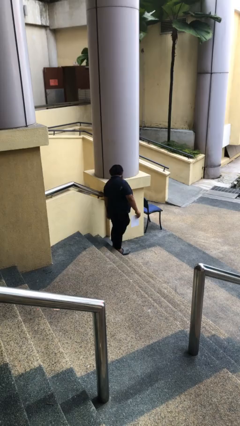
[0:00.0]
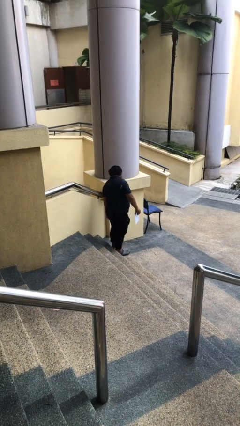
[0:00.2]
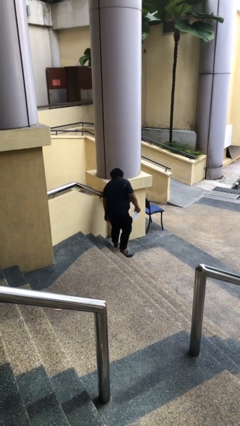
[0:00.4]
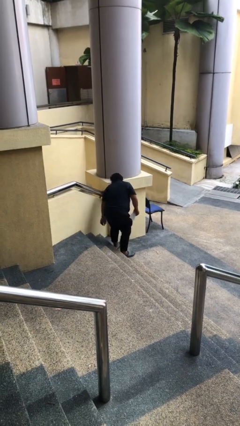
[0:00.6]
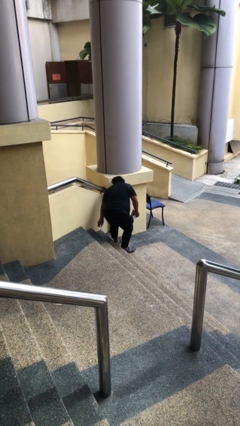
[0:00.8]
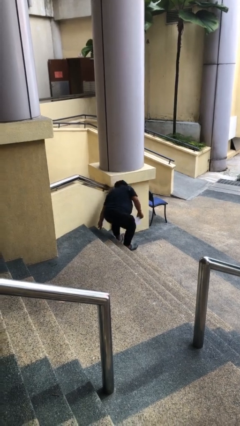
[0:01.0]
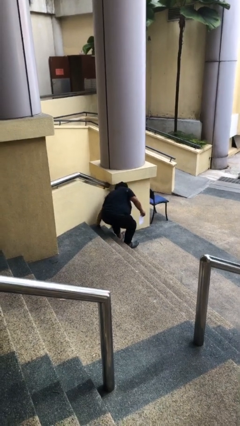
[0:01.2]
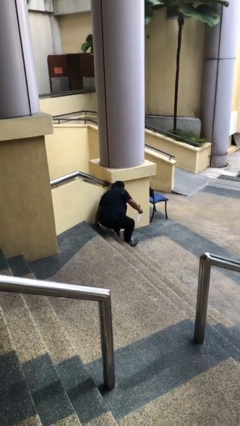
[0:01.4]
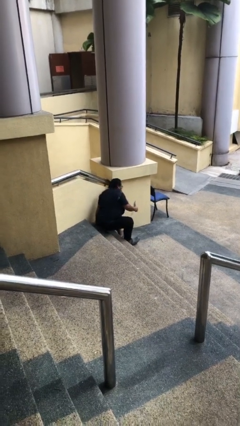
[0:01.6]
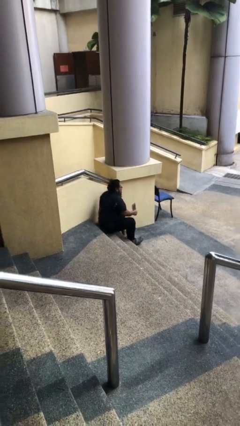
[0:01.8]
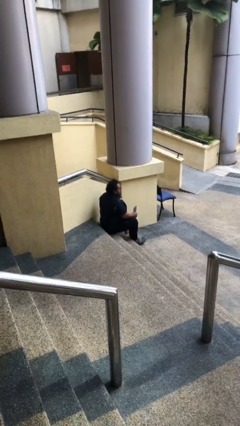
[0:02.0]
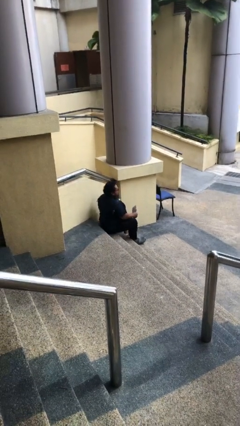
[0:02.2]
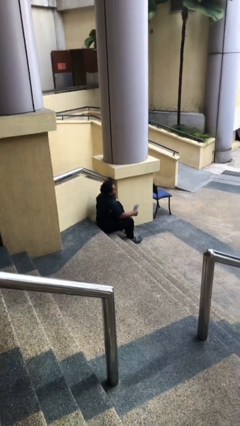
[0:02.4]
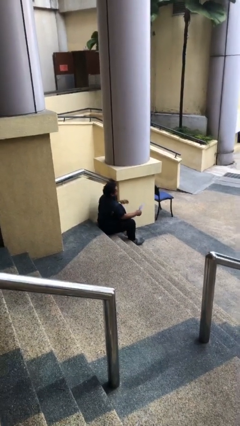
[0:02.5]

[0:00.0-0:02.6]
person sits down

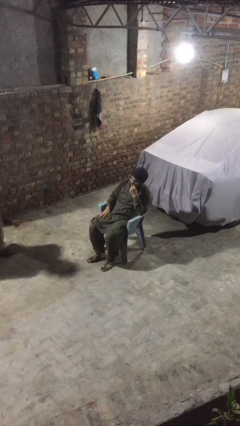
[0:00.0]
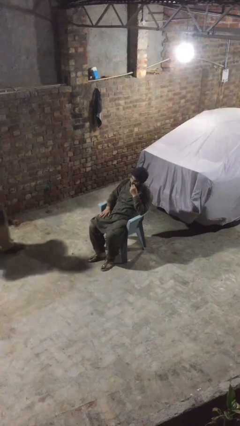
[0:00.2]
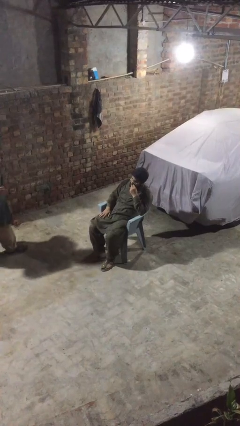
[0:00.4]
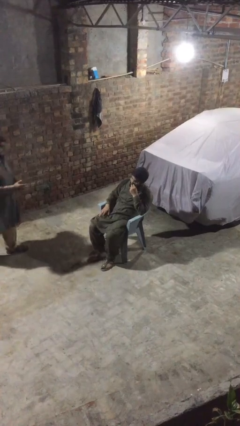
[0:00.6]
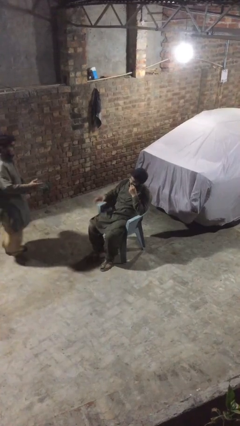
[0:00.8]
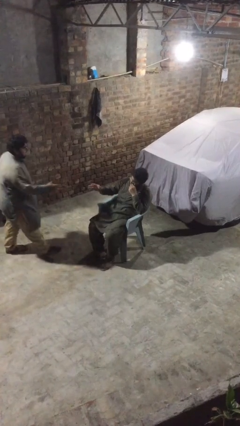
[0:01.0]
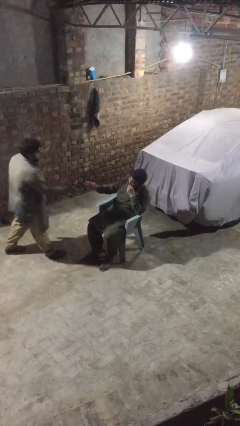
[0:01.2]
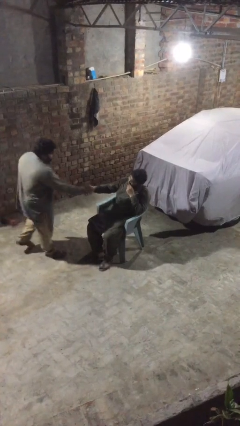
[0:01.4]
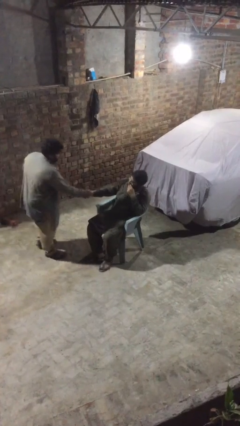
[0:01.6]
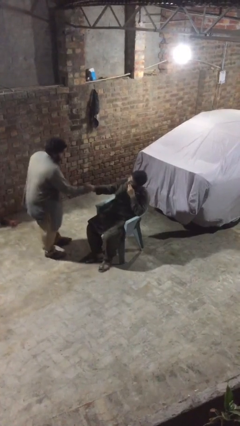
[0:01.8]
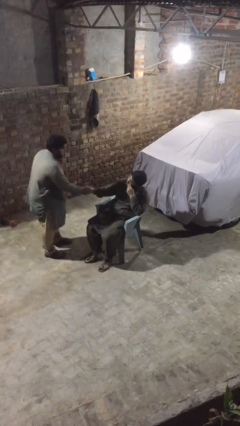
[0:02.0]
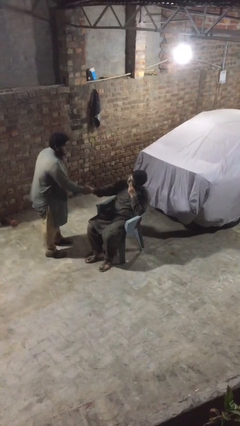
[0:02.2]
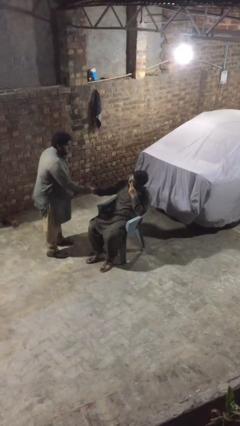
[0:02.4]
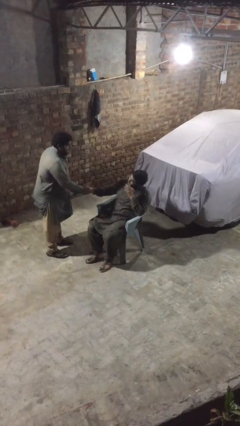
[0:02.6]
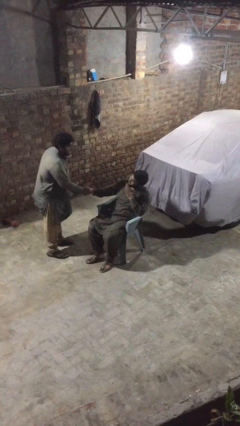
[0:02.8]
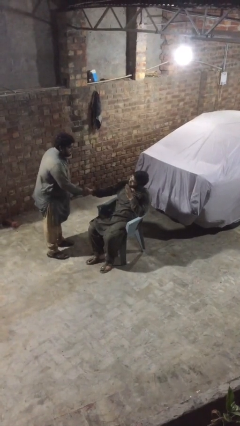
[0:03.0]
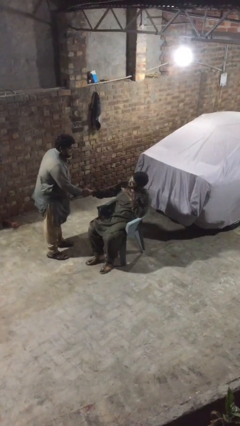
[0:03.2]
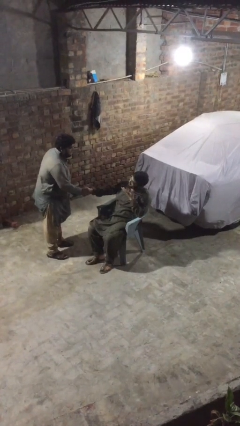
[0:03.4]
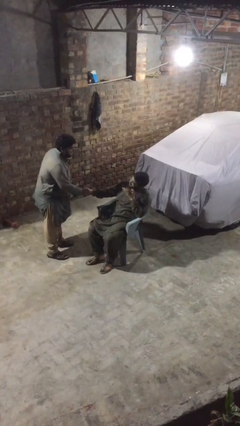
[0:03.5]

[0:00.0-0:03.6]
person shakes hand

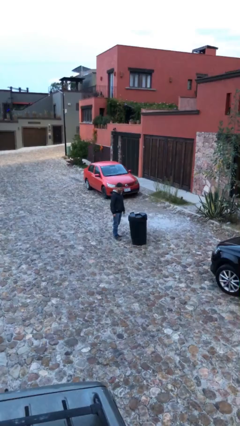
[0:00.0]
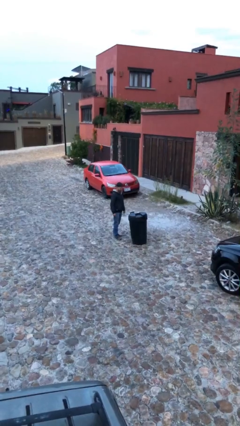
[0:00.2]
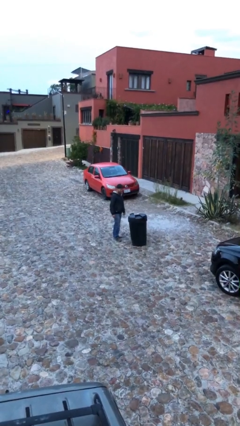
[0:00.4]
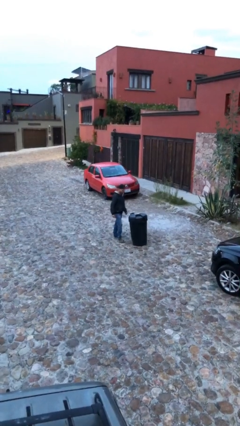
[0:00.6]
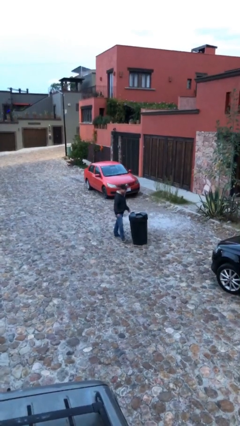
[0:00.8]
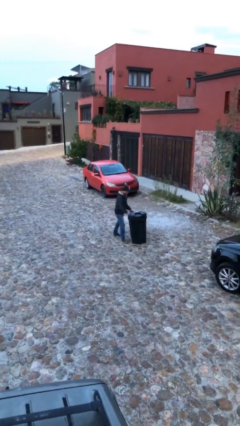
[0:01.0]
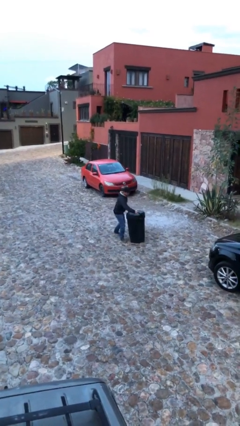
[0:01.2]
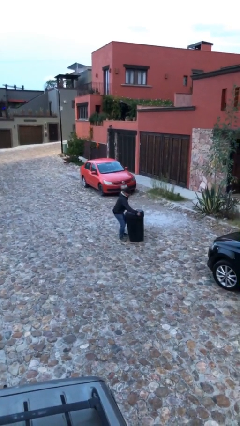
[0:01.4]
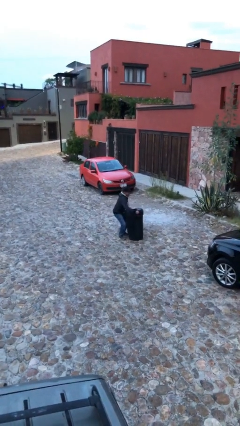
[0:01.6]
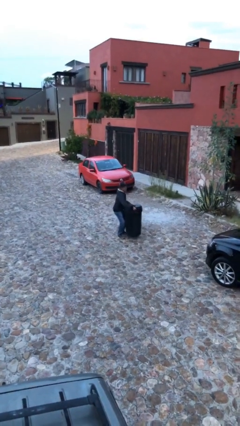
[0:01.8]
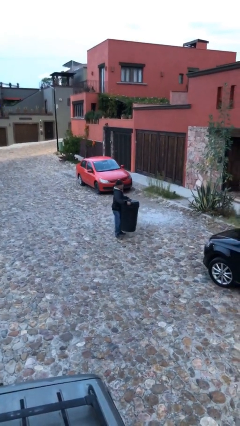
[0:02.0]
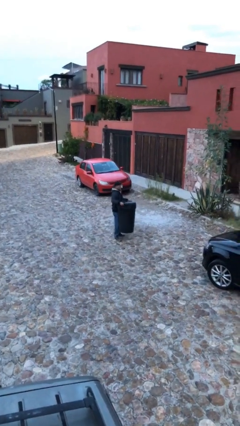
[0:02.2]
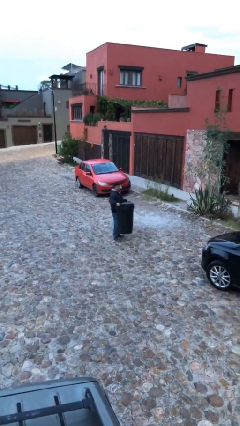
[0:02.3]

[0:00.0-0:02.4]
person picks up object from floor

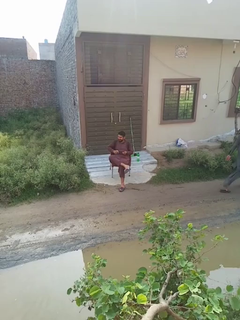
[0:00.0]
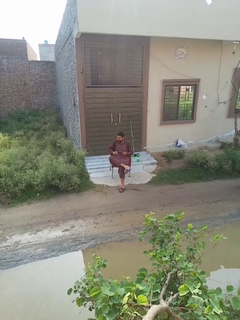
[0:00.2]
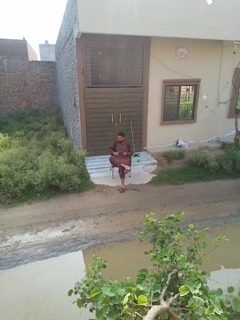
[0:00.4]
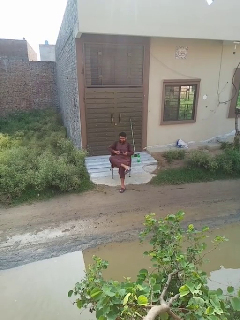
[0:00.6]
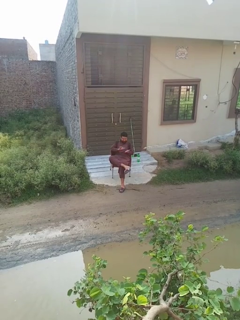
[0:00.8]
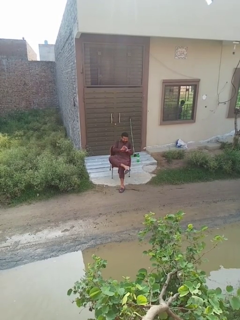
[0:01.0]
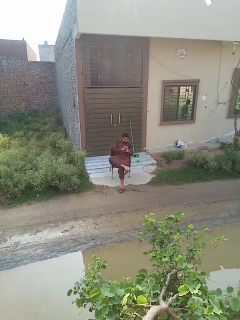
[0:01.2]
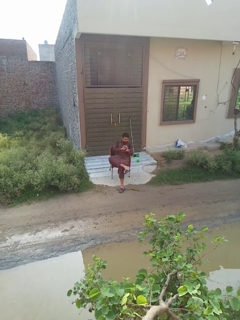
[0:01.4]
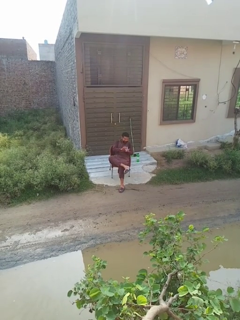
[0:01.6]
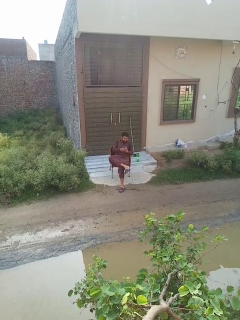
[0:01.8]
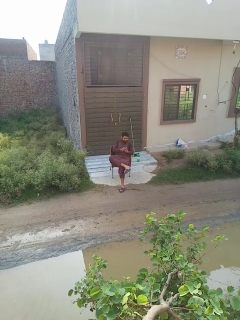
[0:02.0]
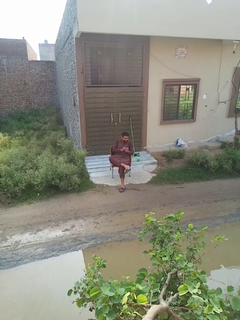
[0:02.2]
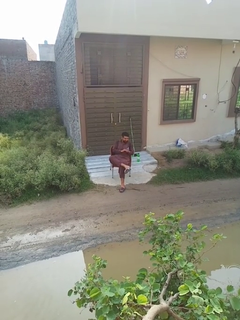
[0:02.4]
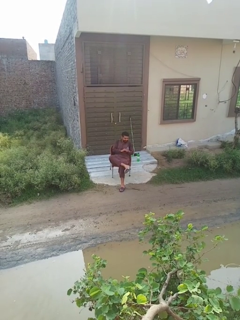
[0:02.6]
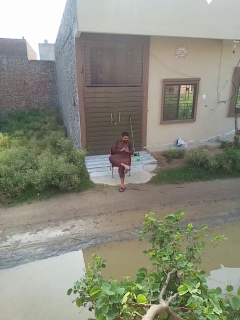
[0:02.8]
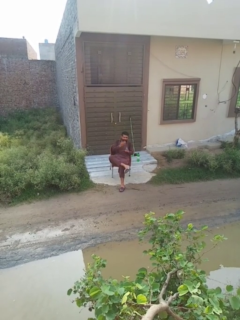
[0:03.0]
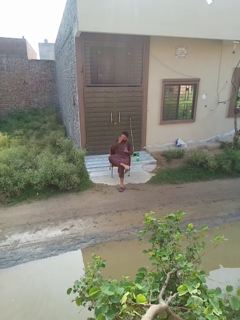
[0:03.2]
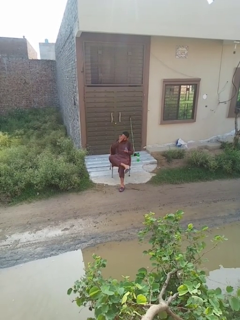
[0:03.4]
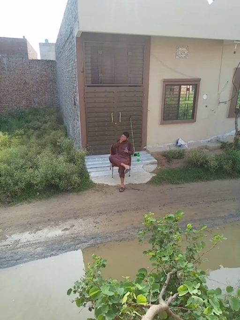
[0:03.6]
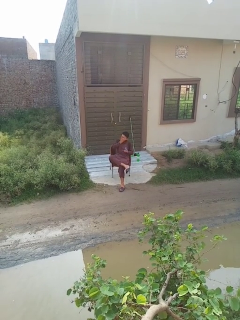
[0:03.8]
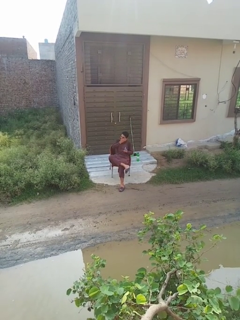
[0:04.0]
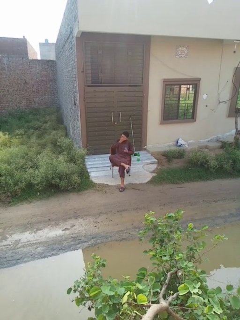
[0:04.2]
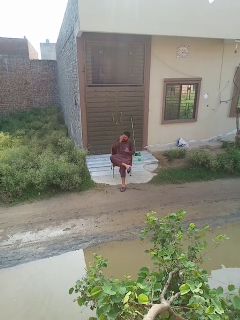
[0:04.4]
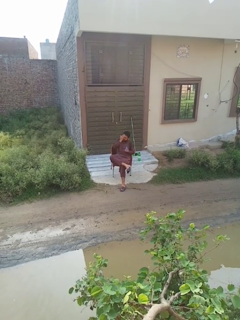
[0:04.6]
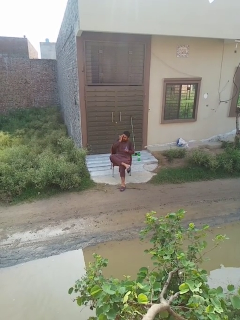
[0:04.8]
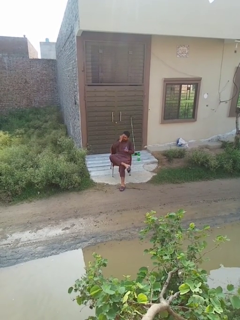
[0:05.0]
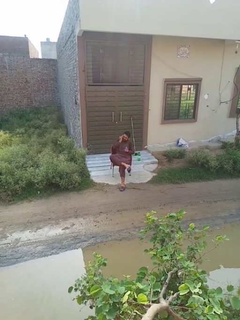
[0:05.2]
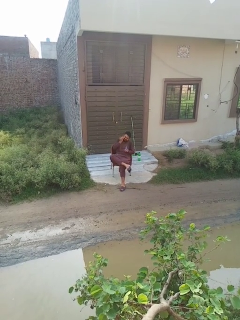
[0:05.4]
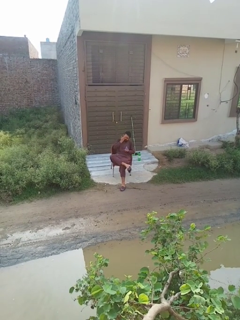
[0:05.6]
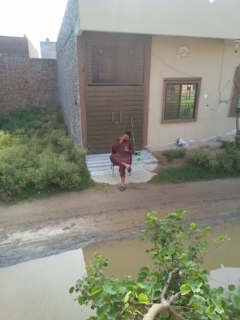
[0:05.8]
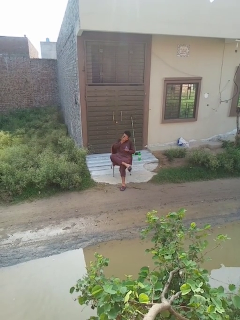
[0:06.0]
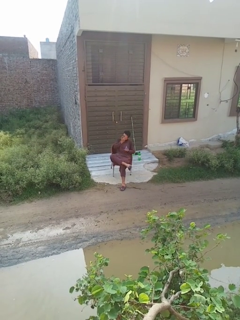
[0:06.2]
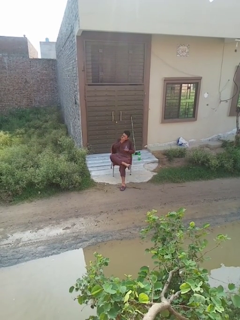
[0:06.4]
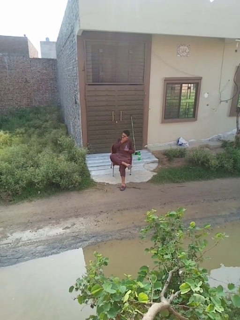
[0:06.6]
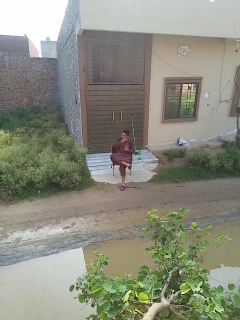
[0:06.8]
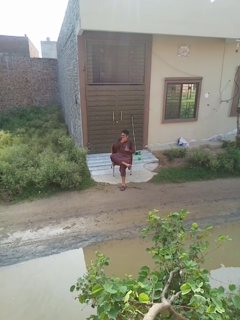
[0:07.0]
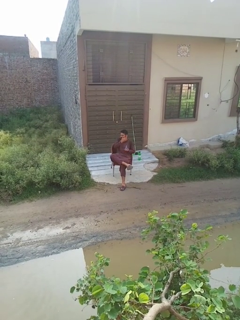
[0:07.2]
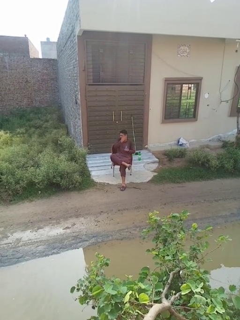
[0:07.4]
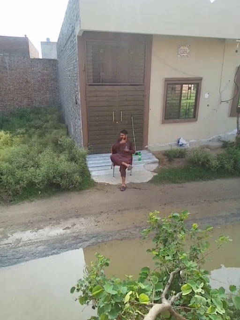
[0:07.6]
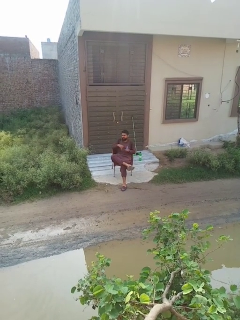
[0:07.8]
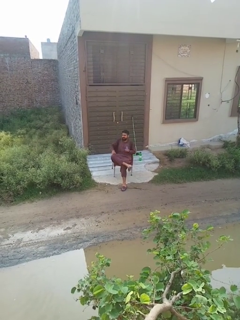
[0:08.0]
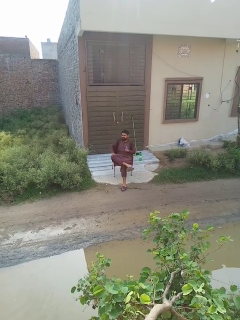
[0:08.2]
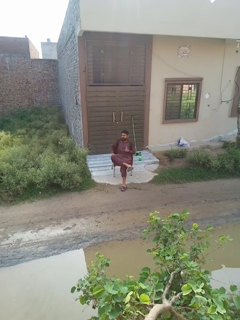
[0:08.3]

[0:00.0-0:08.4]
person applies facial moisturizer

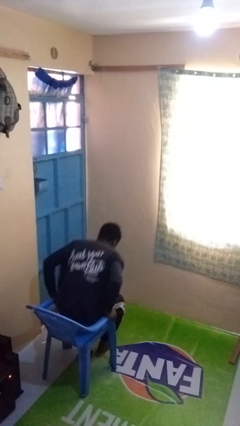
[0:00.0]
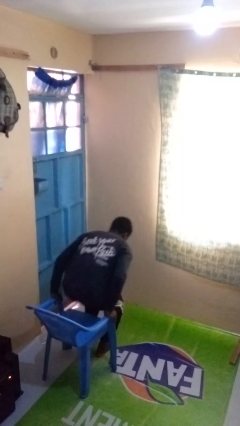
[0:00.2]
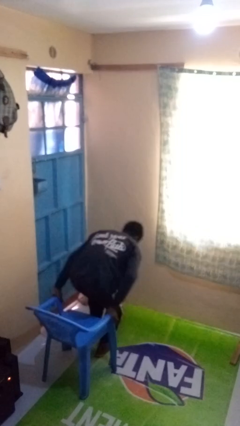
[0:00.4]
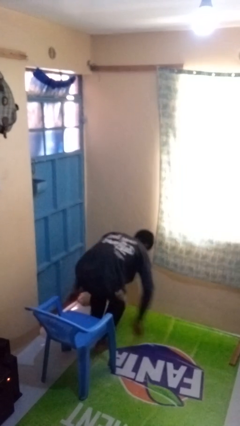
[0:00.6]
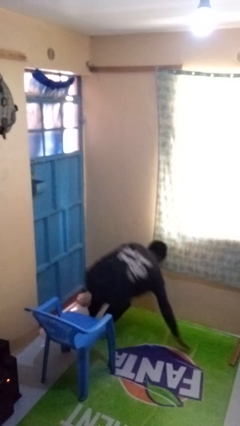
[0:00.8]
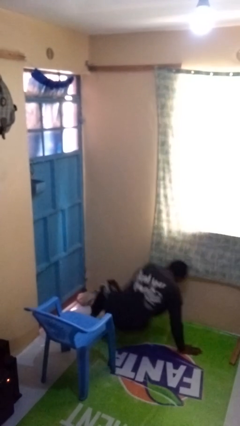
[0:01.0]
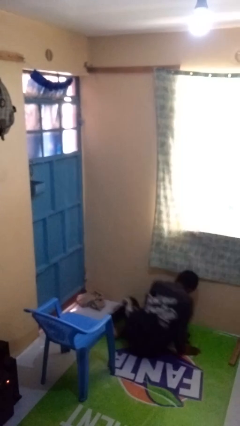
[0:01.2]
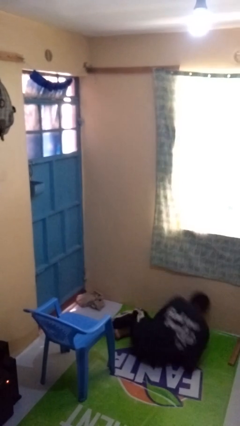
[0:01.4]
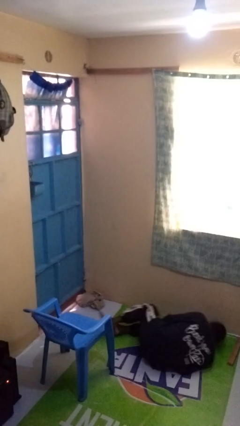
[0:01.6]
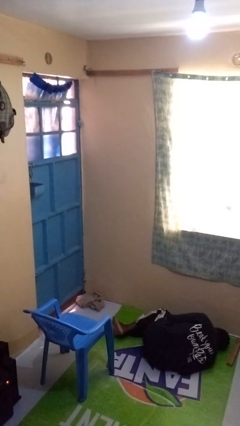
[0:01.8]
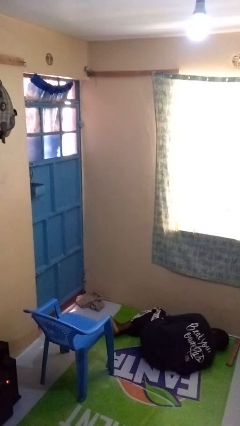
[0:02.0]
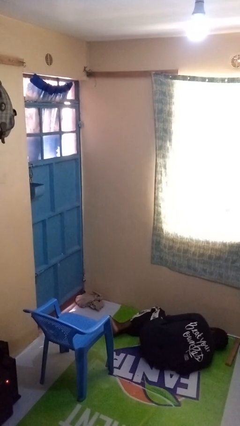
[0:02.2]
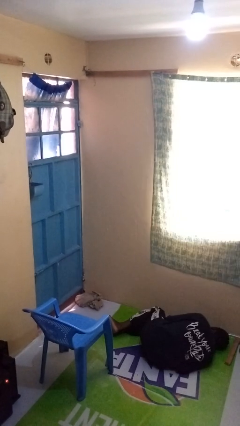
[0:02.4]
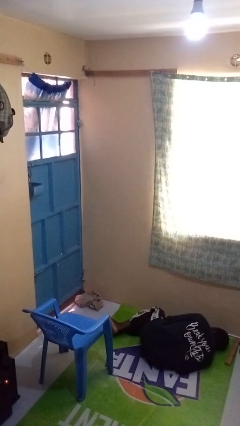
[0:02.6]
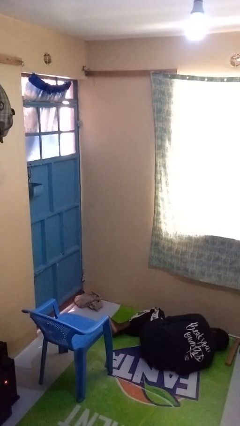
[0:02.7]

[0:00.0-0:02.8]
person falls from chair
